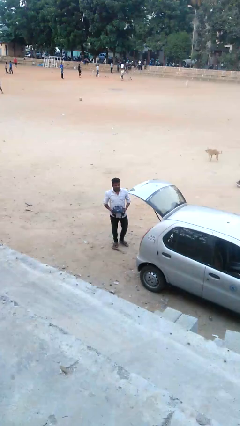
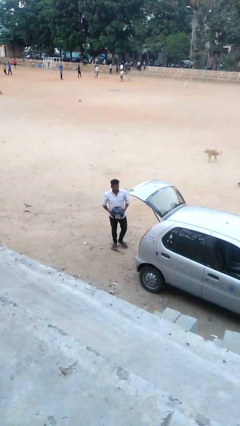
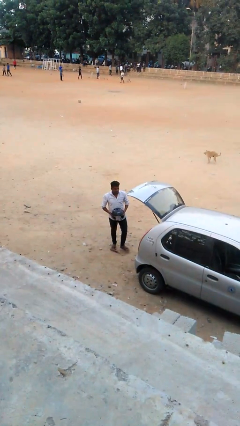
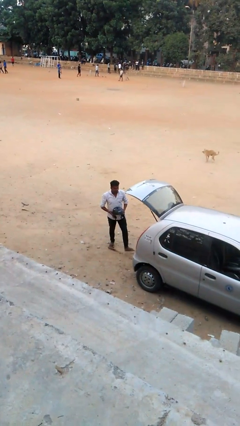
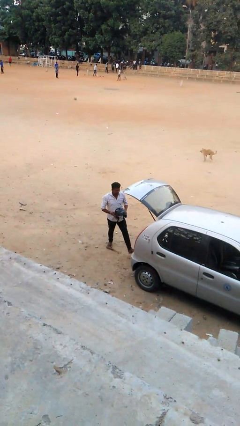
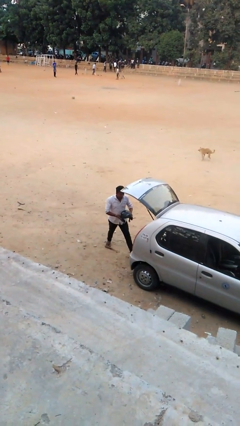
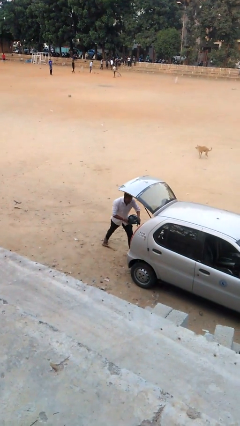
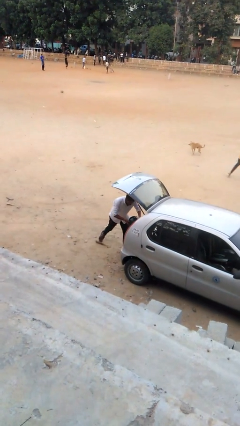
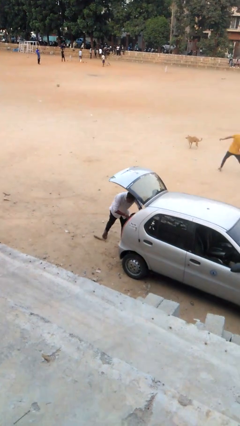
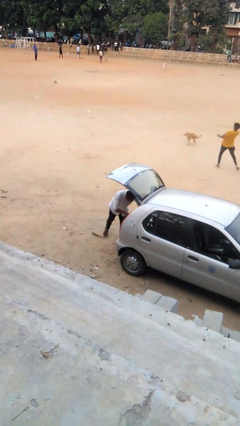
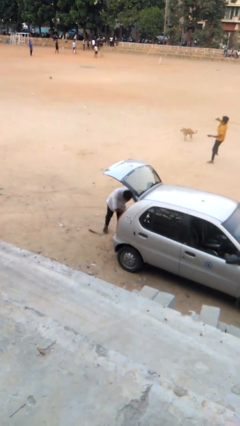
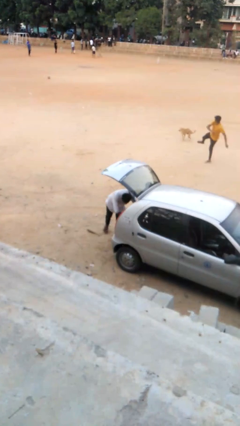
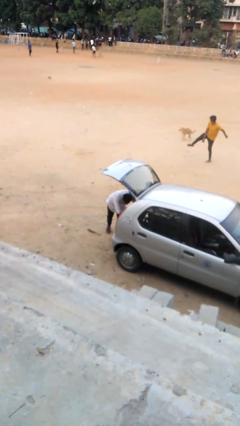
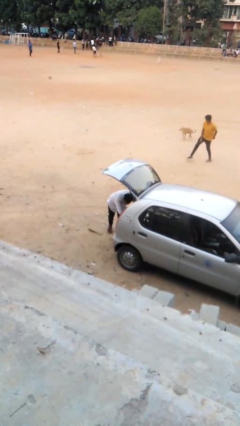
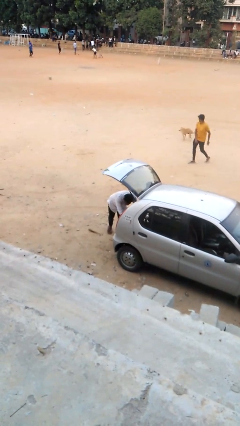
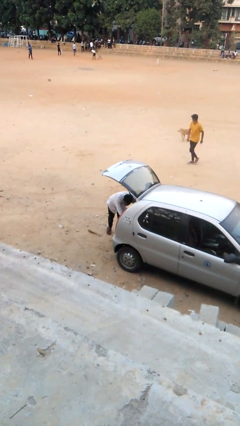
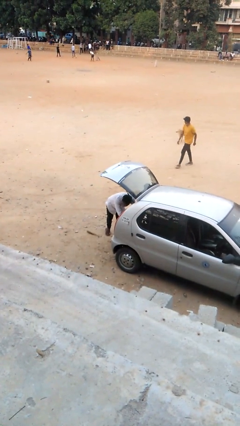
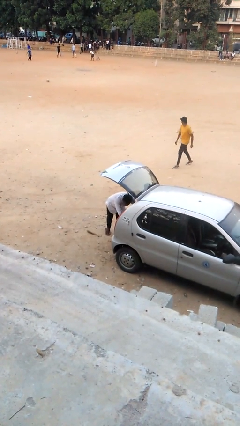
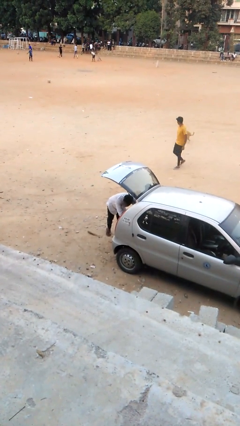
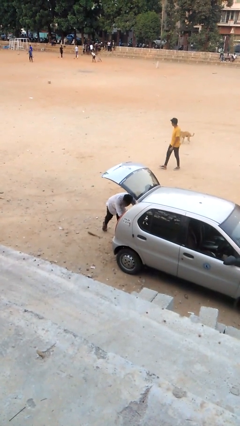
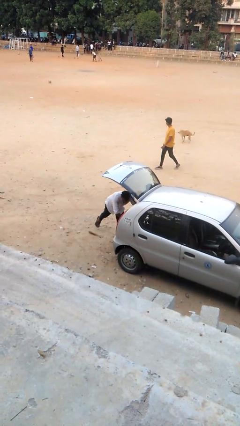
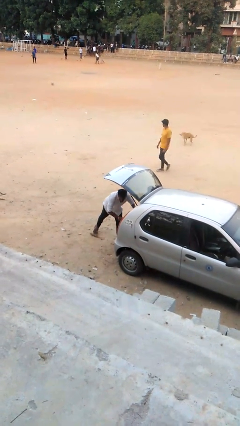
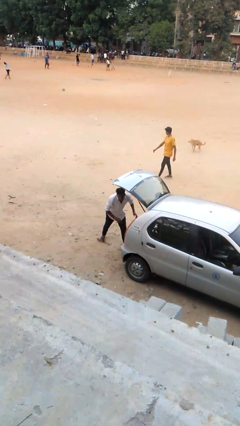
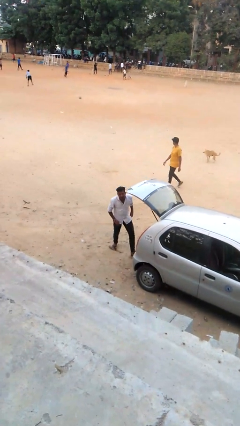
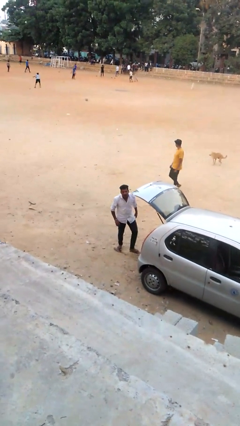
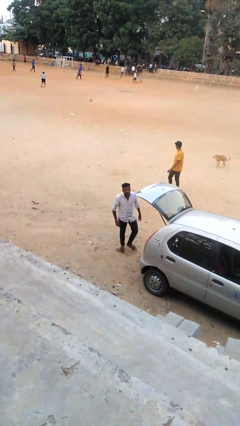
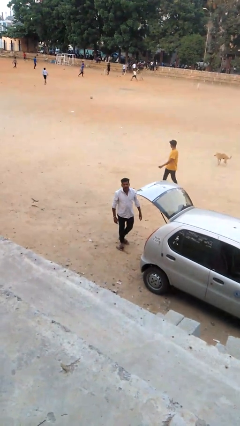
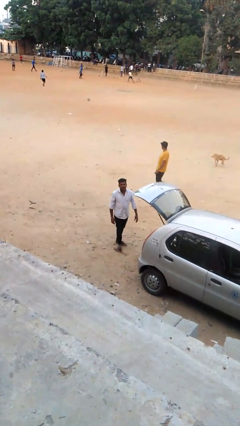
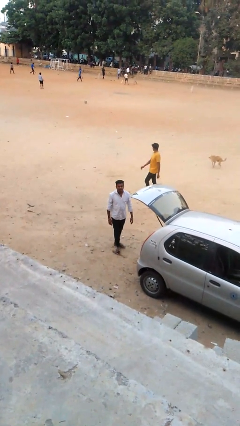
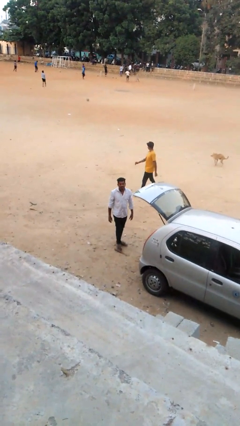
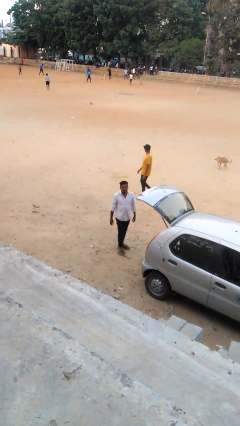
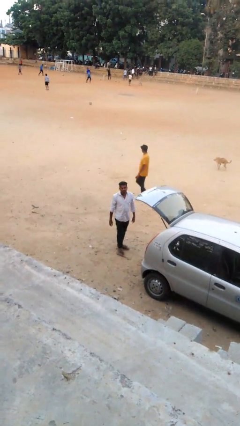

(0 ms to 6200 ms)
person loads car

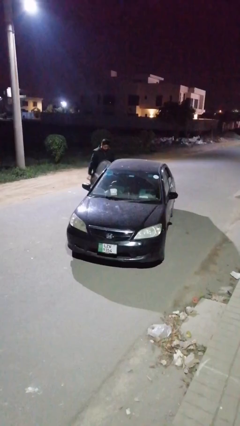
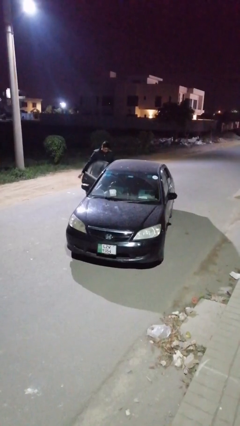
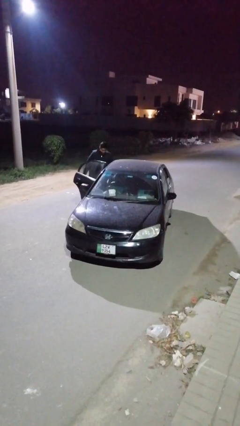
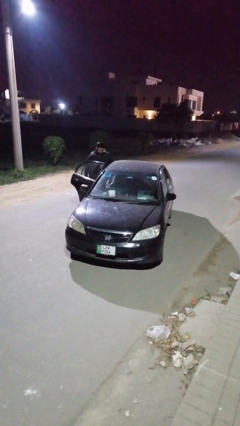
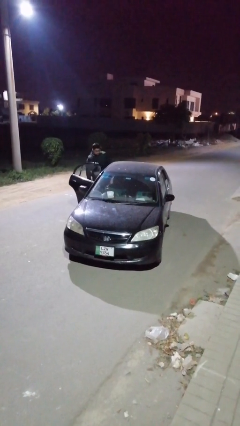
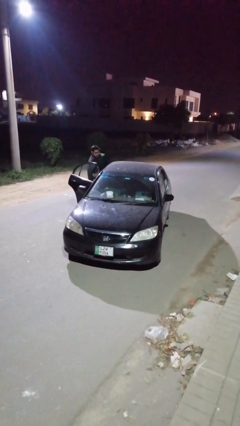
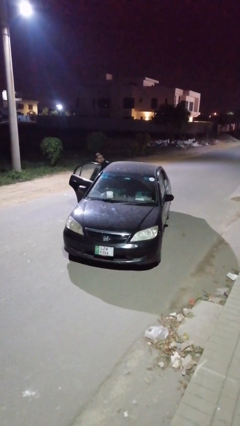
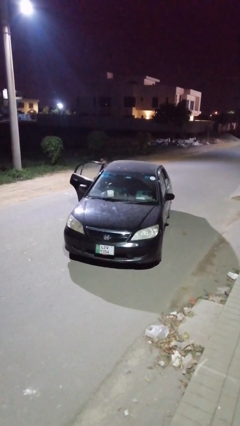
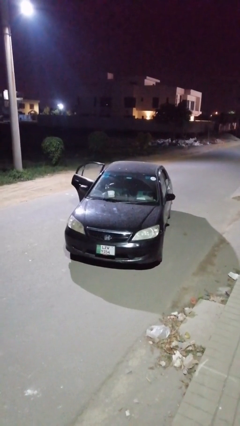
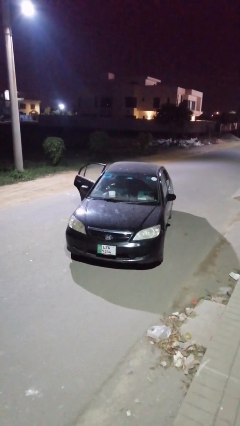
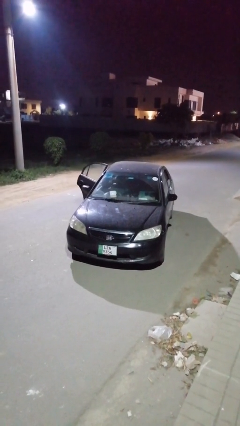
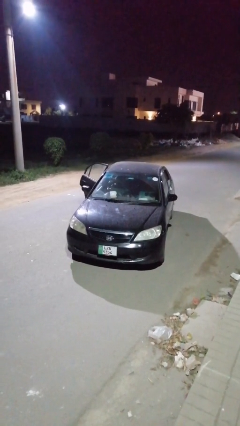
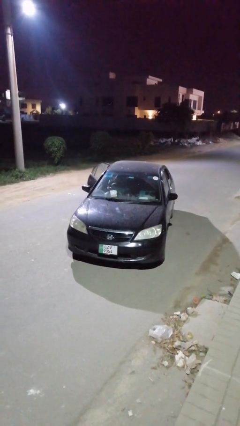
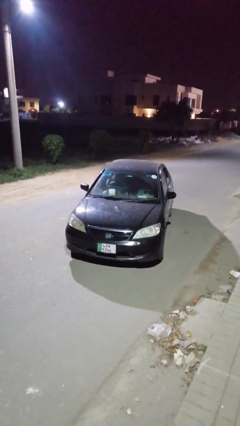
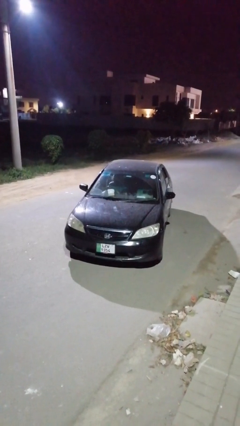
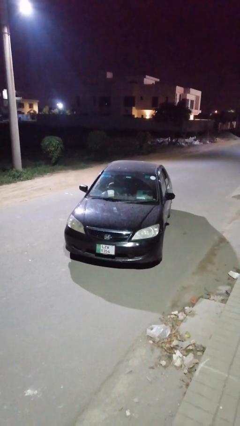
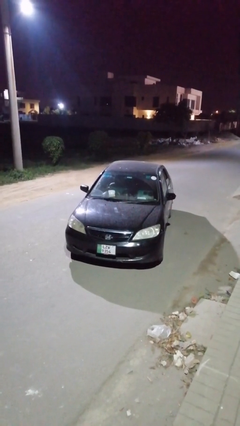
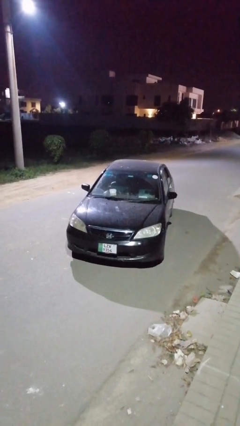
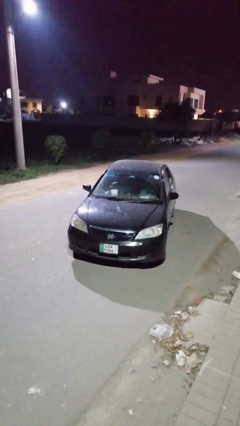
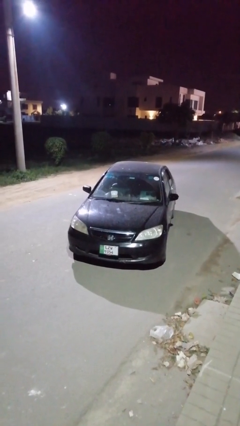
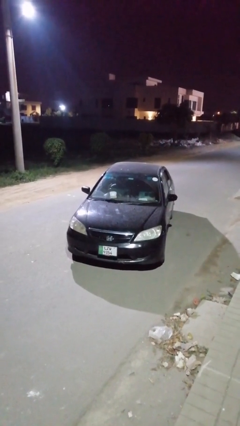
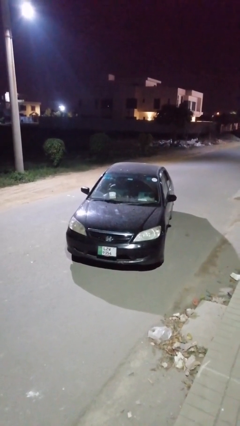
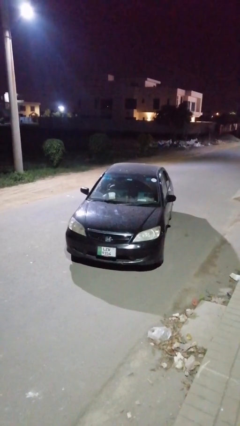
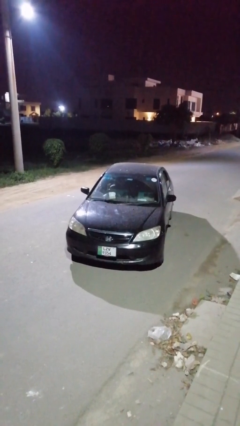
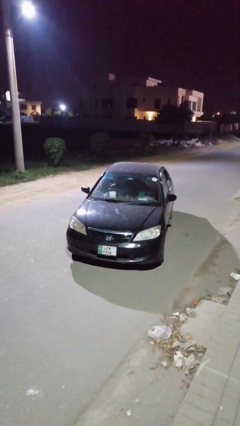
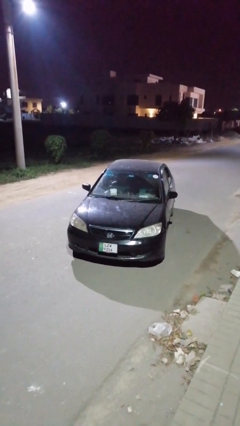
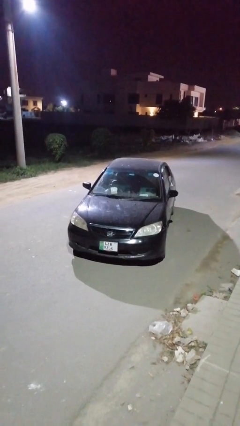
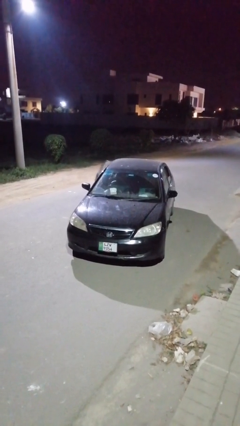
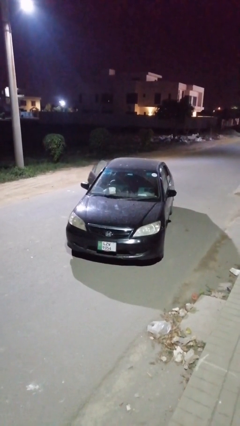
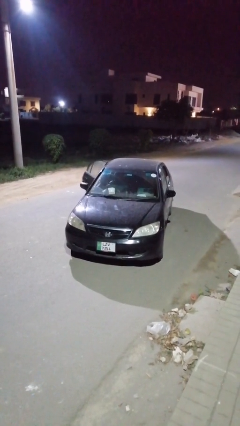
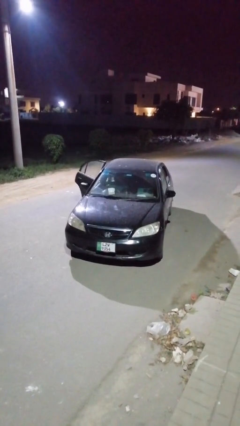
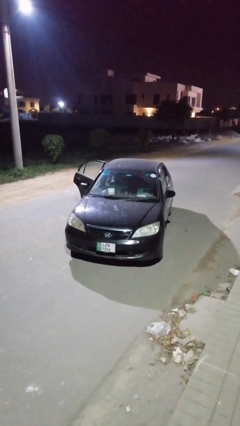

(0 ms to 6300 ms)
car picks up person

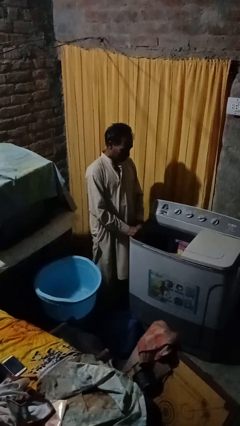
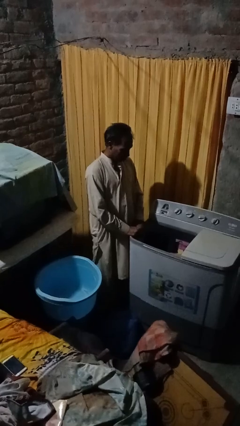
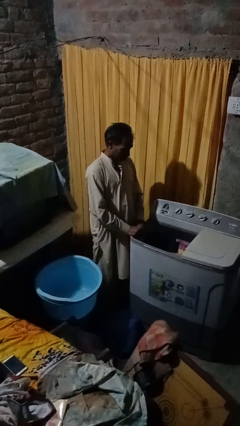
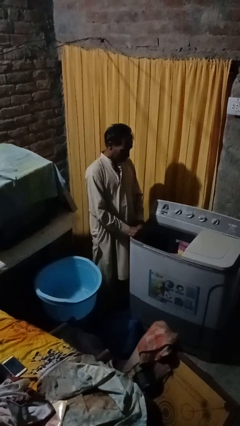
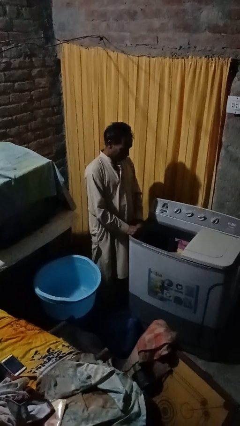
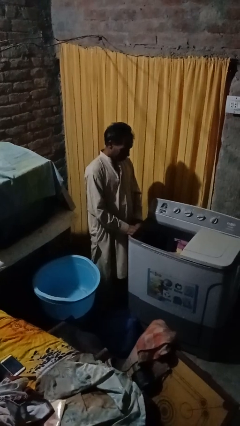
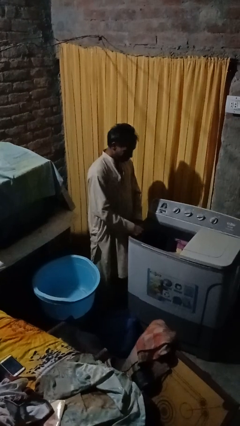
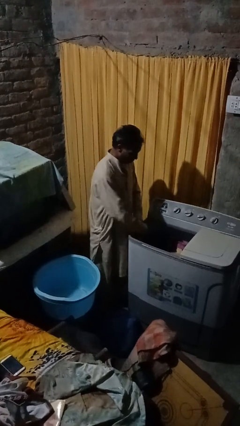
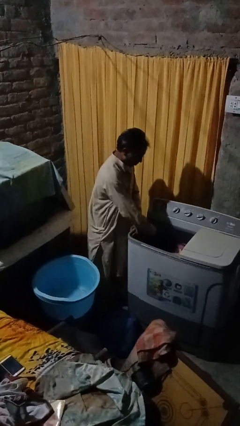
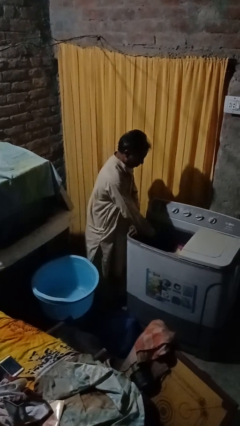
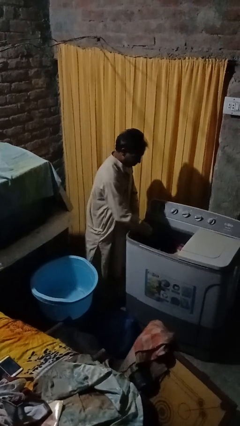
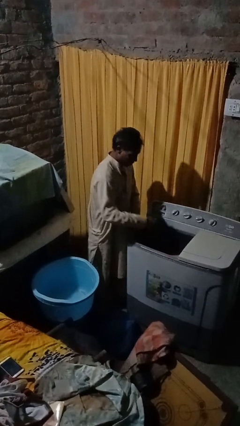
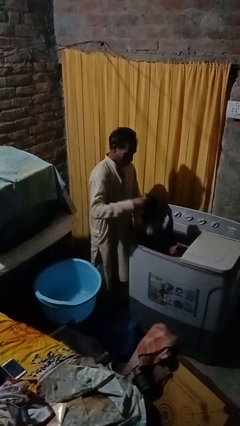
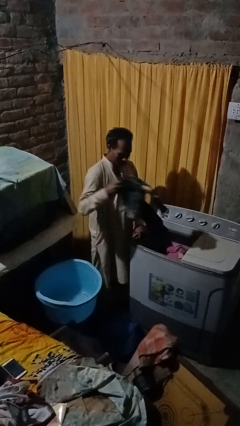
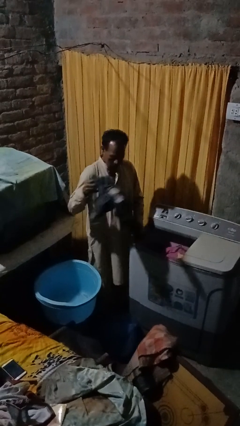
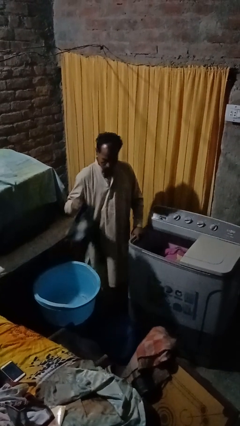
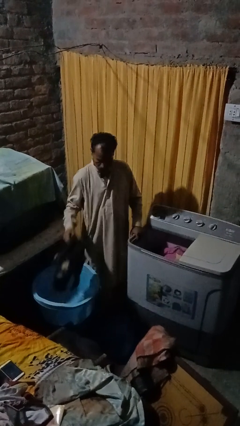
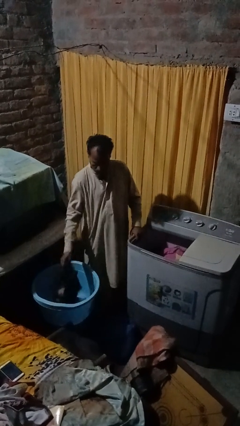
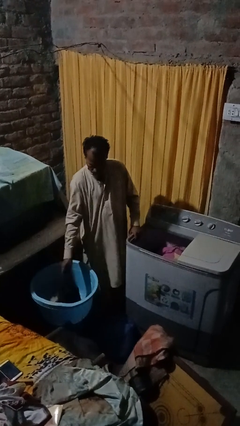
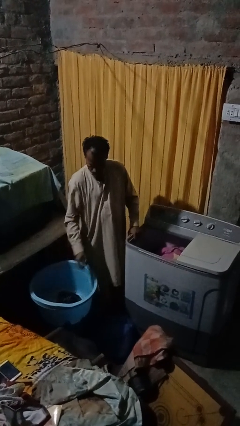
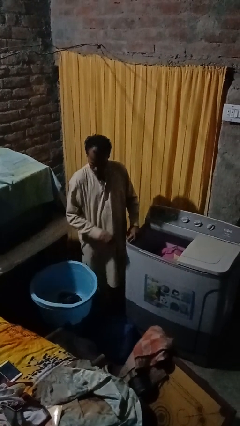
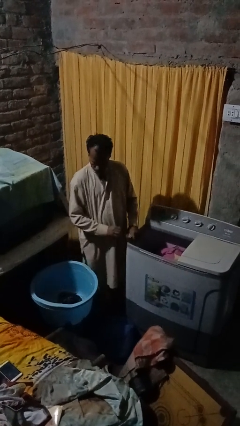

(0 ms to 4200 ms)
person unloads clotheswasher

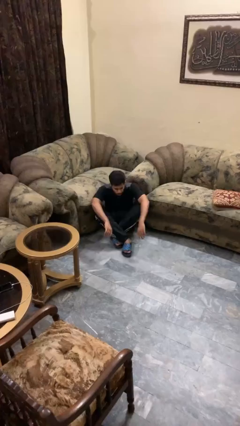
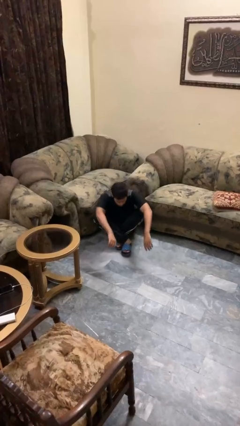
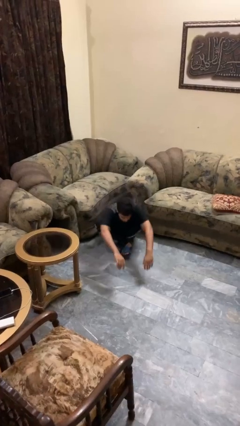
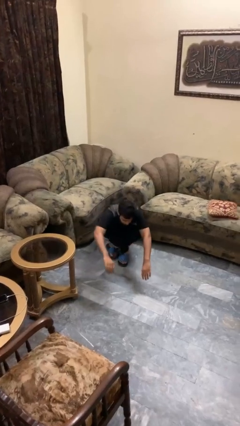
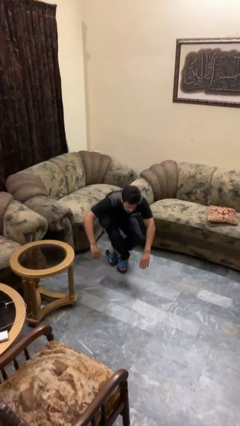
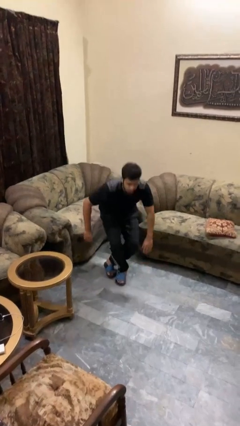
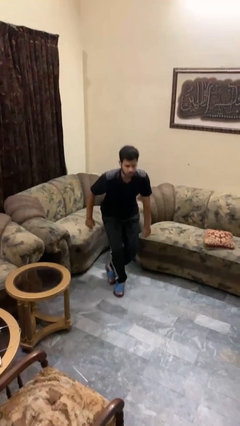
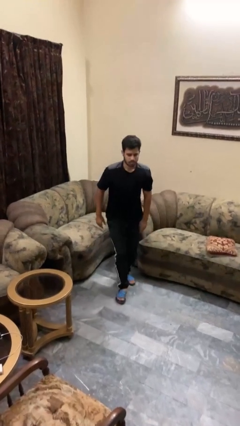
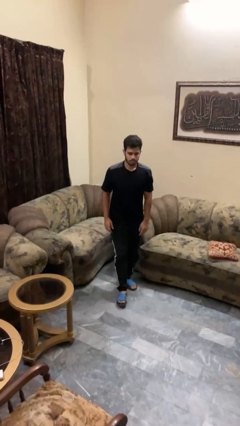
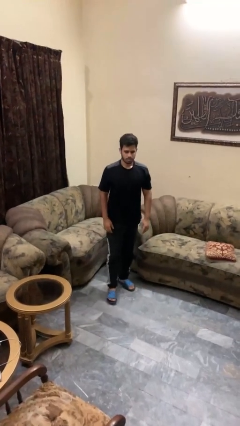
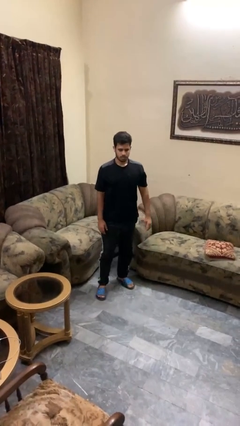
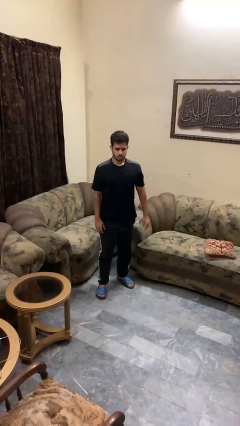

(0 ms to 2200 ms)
person stands up from floor
